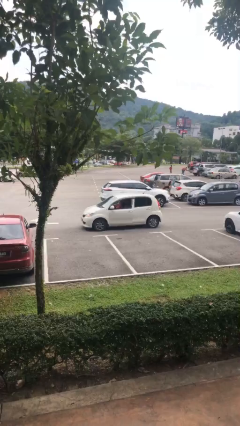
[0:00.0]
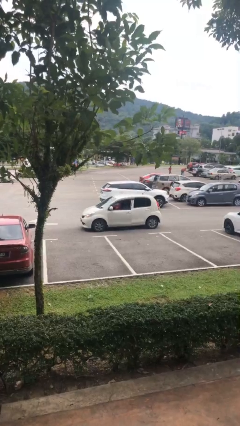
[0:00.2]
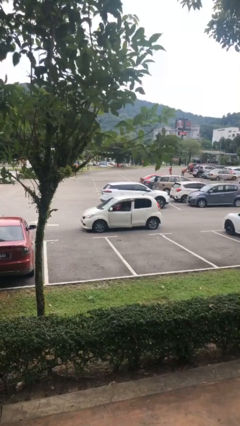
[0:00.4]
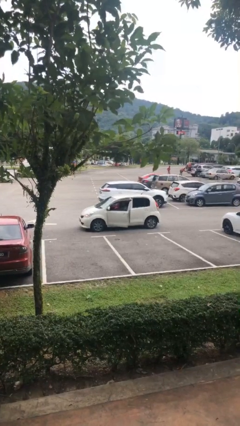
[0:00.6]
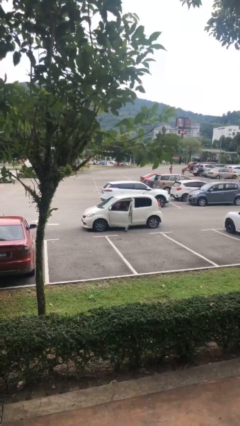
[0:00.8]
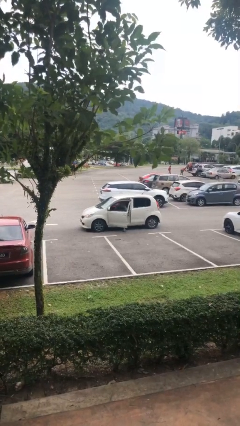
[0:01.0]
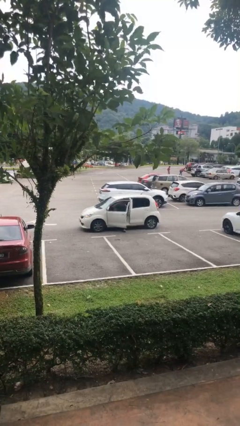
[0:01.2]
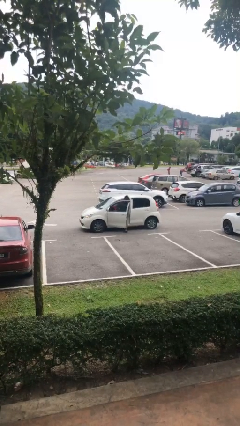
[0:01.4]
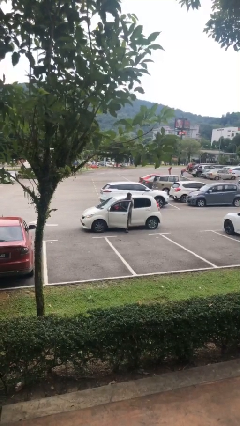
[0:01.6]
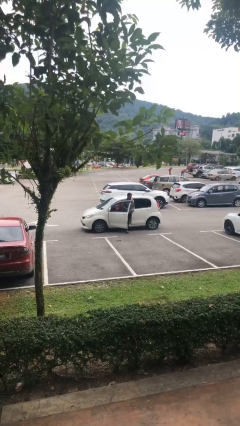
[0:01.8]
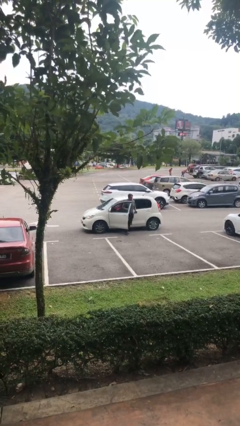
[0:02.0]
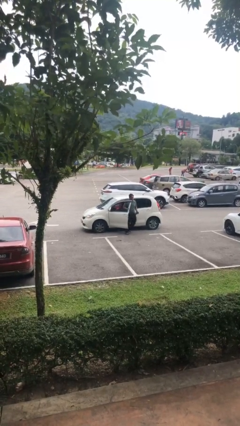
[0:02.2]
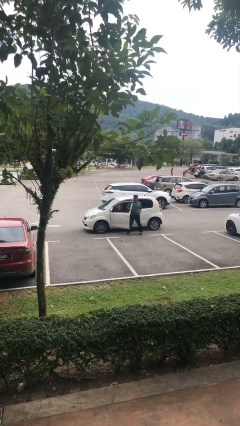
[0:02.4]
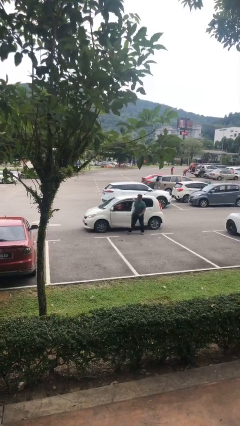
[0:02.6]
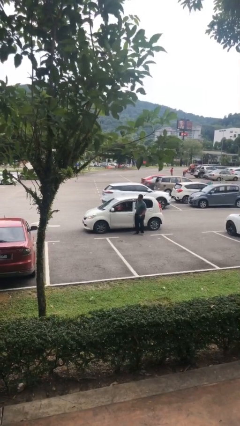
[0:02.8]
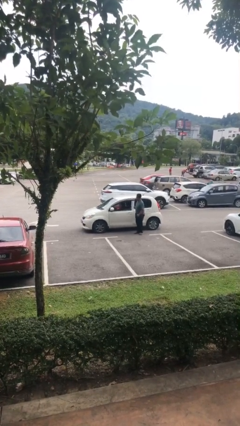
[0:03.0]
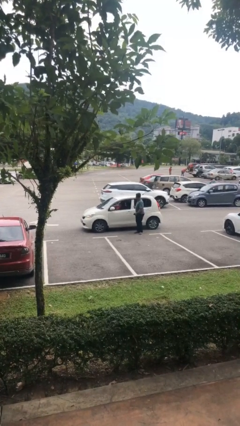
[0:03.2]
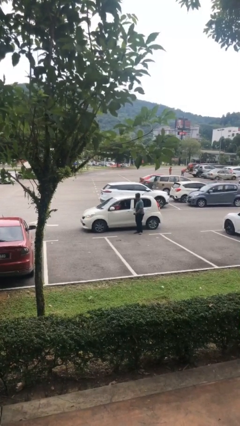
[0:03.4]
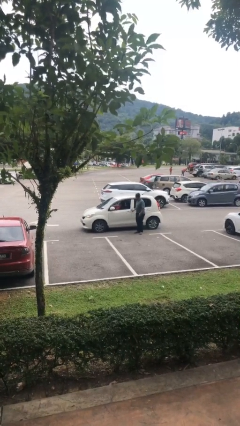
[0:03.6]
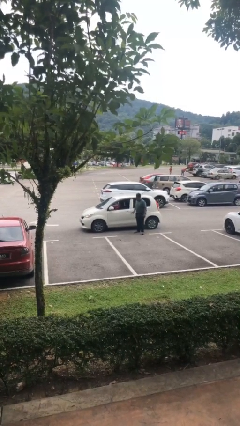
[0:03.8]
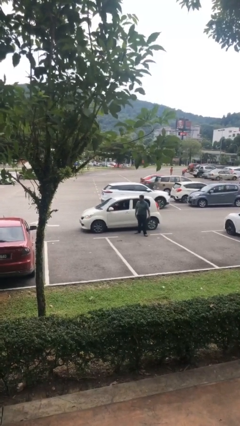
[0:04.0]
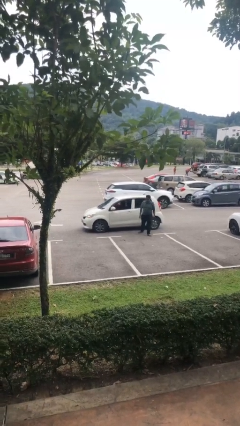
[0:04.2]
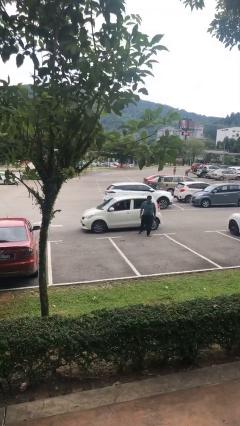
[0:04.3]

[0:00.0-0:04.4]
car drops off person

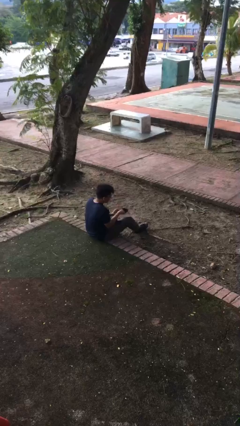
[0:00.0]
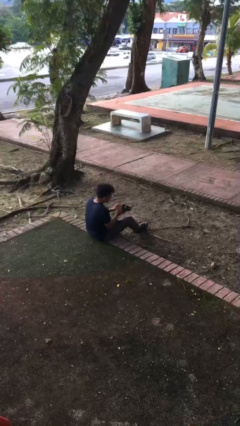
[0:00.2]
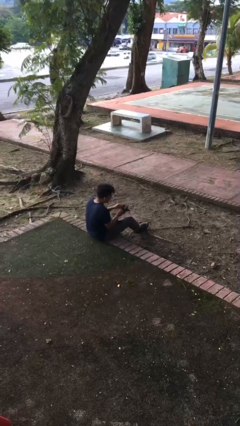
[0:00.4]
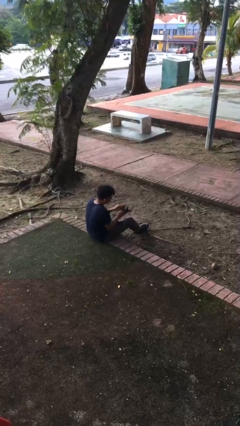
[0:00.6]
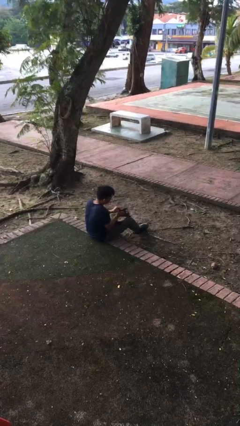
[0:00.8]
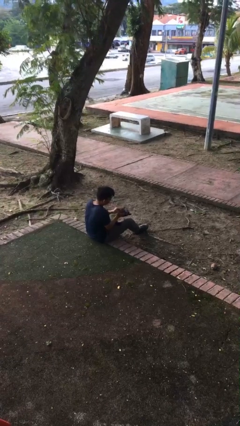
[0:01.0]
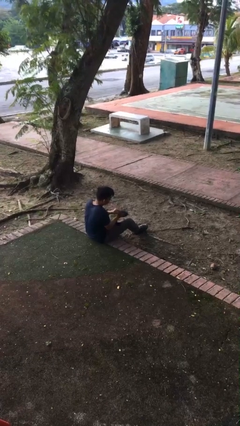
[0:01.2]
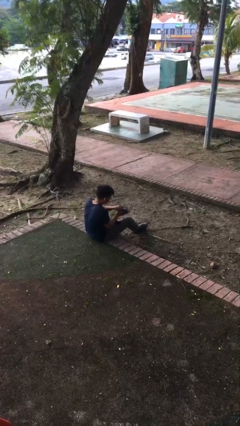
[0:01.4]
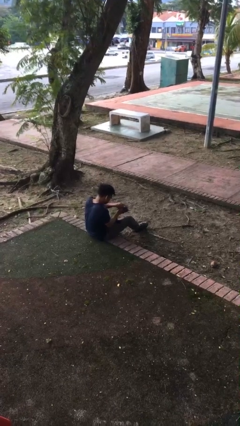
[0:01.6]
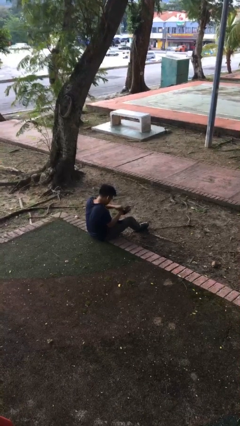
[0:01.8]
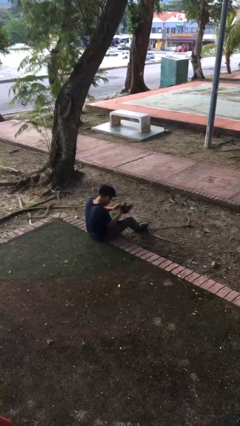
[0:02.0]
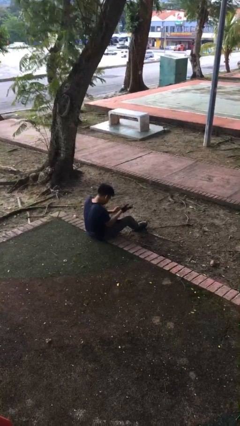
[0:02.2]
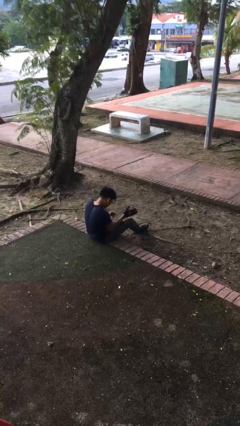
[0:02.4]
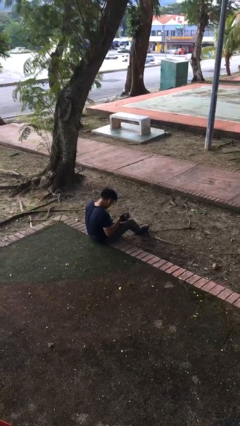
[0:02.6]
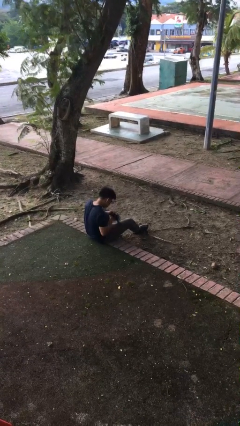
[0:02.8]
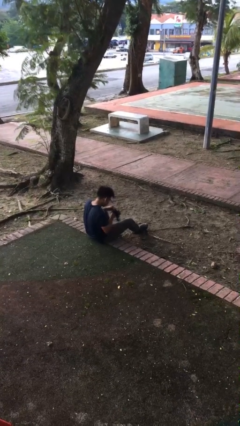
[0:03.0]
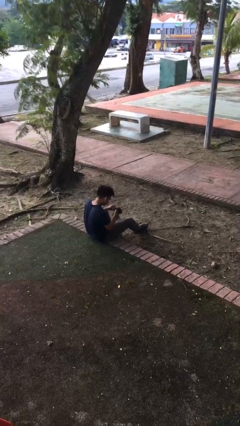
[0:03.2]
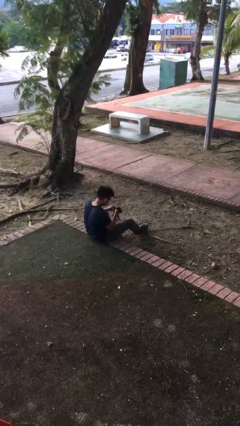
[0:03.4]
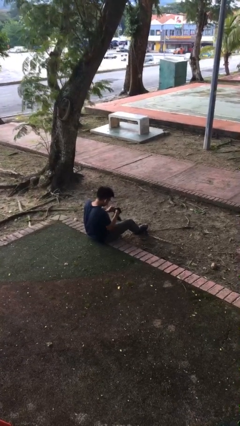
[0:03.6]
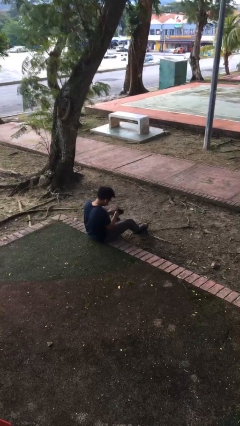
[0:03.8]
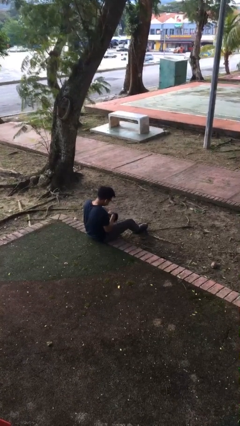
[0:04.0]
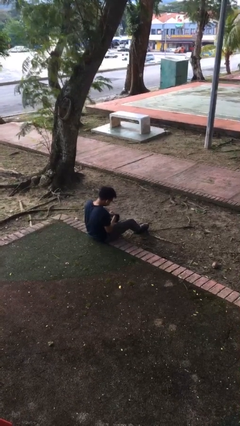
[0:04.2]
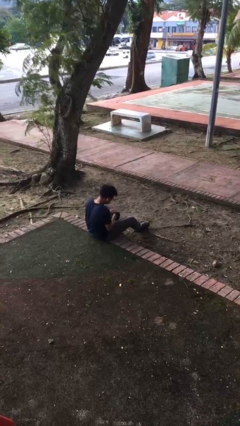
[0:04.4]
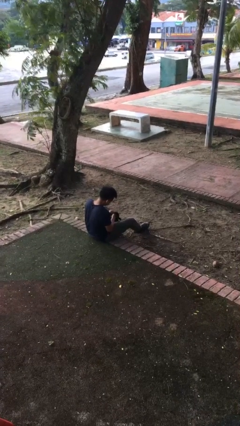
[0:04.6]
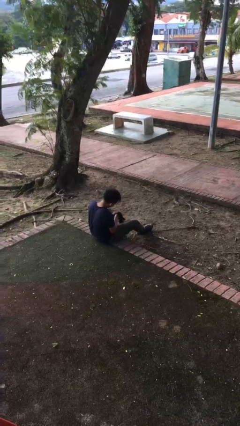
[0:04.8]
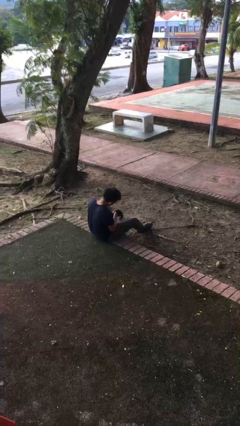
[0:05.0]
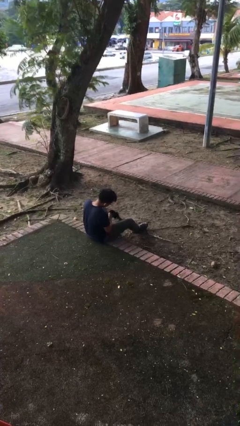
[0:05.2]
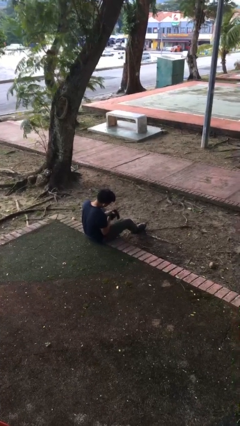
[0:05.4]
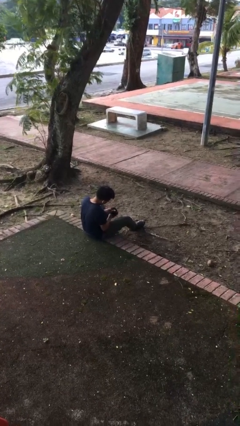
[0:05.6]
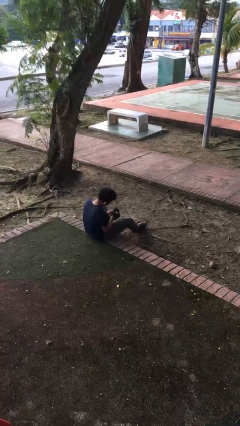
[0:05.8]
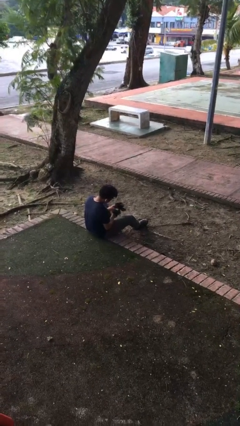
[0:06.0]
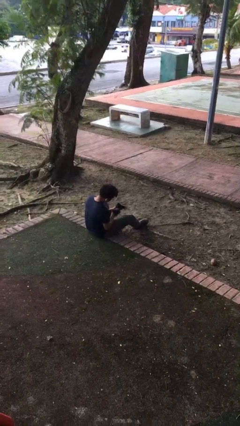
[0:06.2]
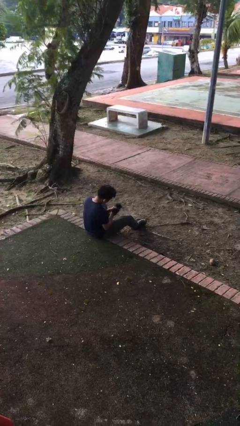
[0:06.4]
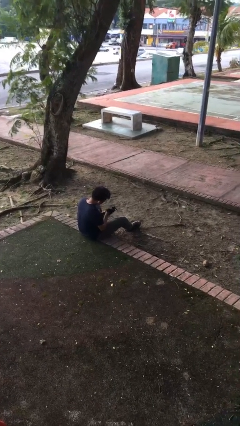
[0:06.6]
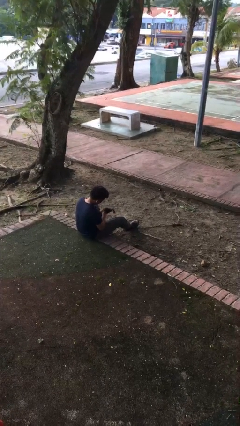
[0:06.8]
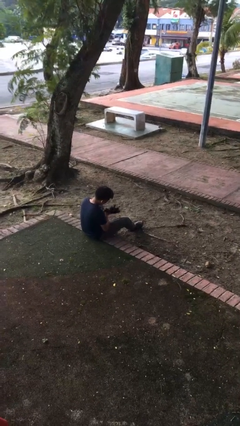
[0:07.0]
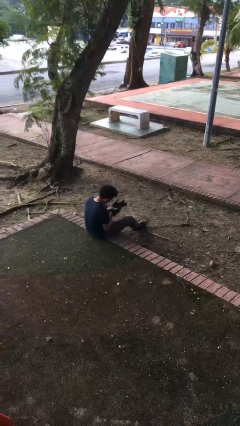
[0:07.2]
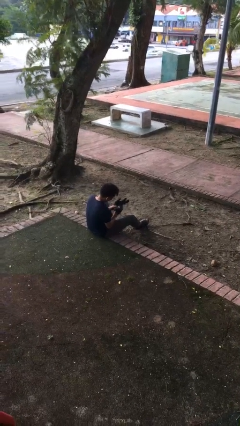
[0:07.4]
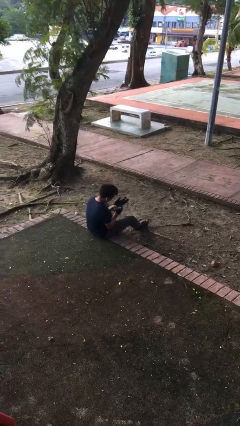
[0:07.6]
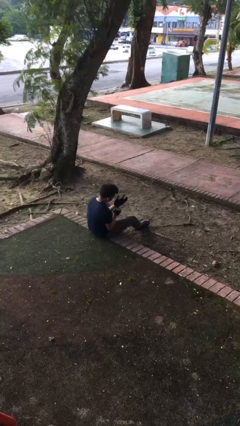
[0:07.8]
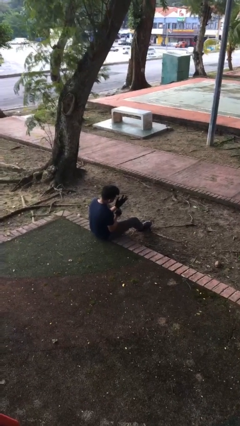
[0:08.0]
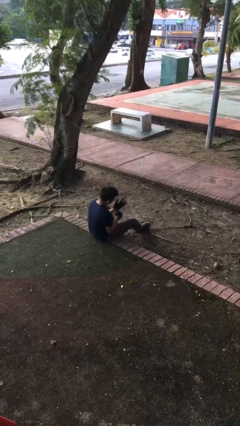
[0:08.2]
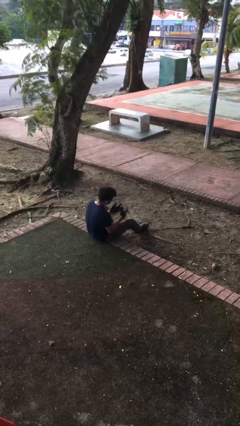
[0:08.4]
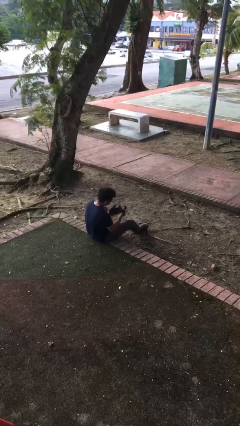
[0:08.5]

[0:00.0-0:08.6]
person puts on gloves

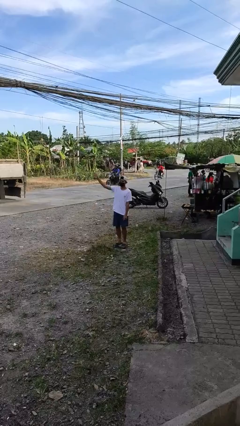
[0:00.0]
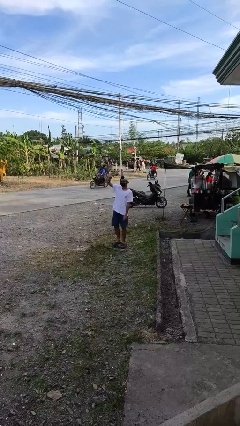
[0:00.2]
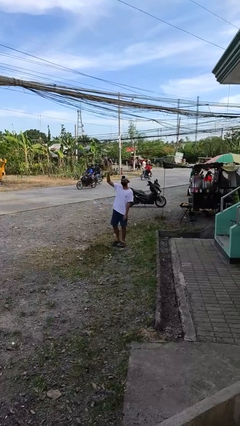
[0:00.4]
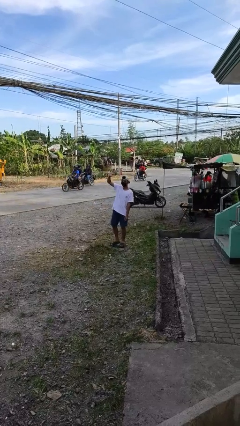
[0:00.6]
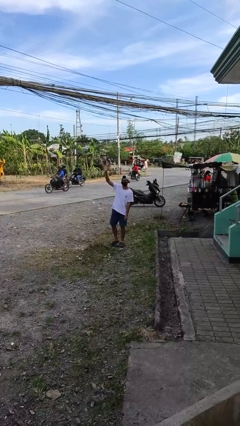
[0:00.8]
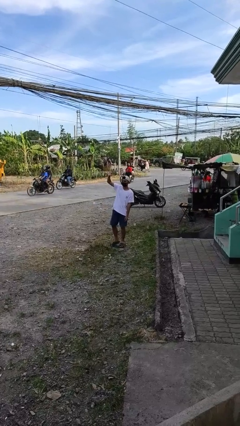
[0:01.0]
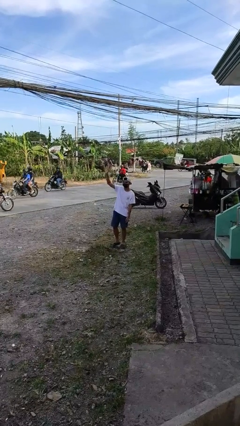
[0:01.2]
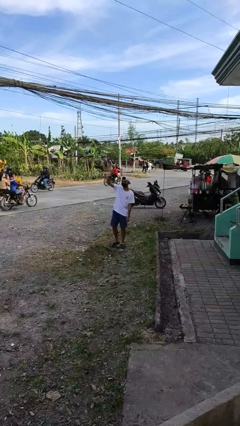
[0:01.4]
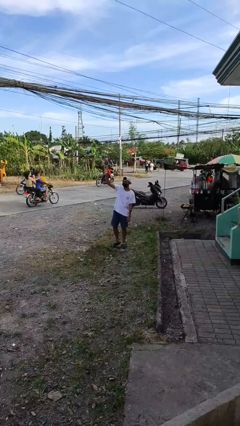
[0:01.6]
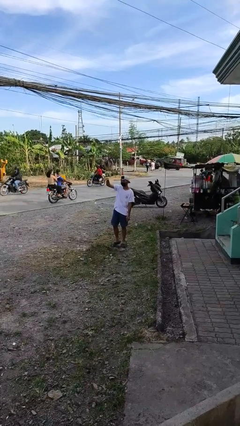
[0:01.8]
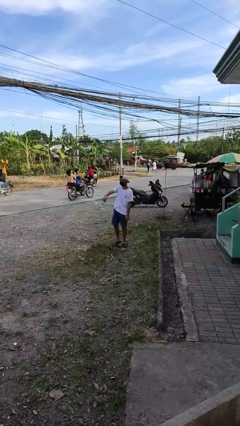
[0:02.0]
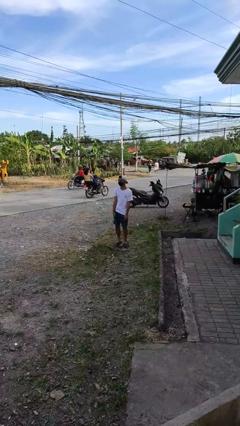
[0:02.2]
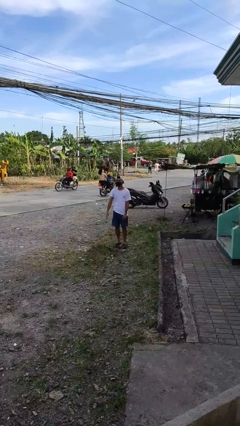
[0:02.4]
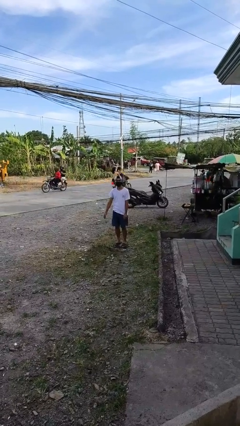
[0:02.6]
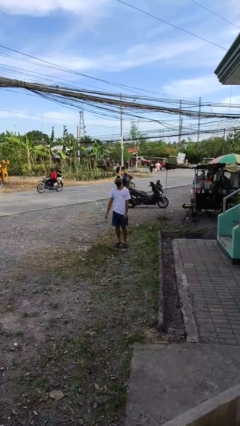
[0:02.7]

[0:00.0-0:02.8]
person waves at person

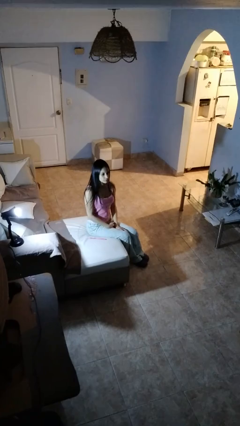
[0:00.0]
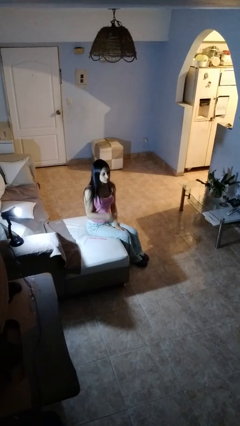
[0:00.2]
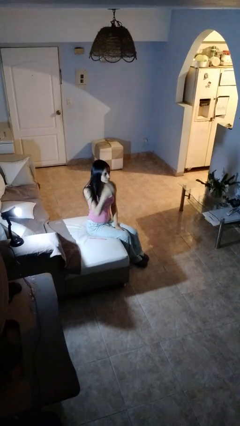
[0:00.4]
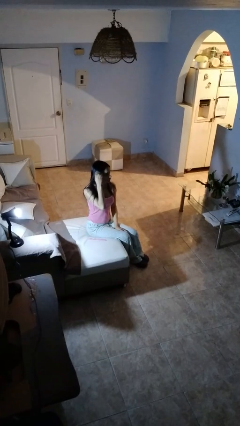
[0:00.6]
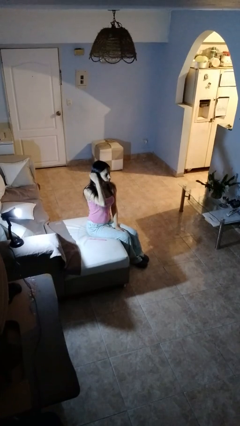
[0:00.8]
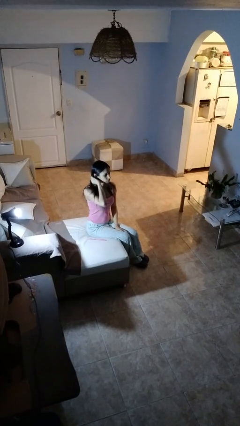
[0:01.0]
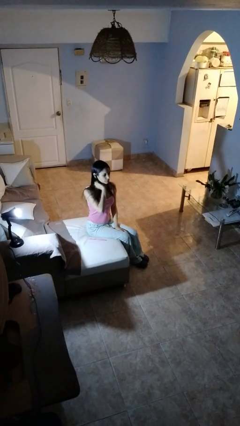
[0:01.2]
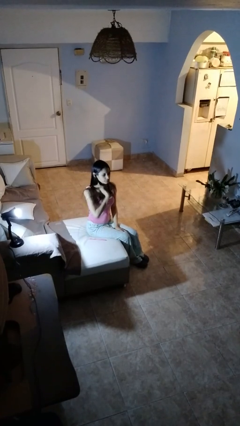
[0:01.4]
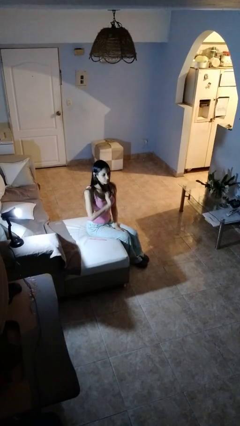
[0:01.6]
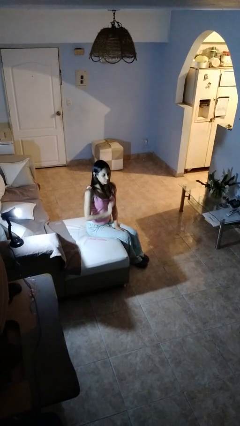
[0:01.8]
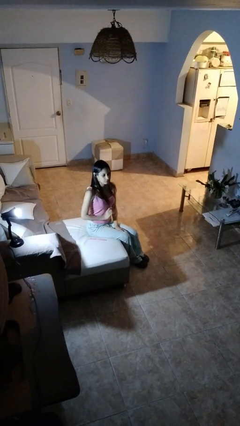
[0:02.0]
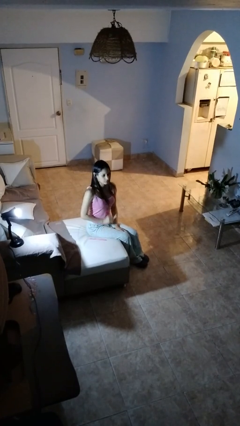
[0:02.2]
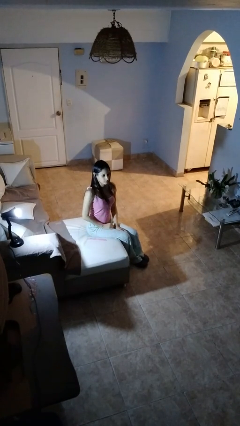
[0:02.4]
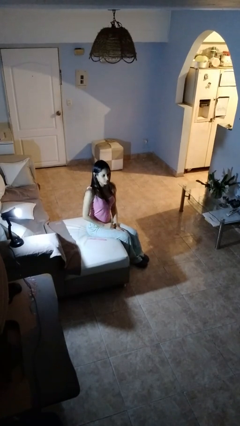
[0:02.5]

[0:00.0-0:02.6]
person strokes hair
